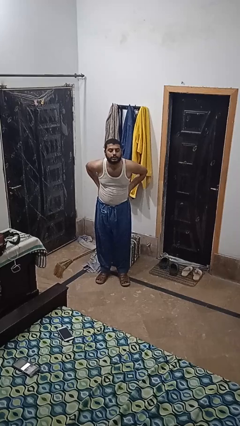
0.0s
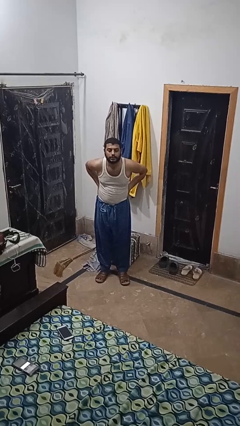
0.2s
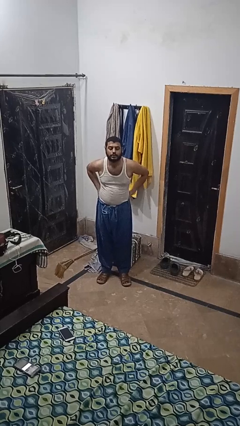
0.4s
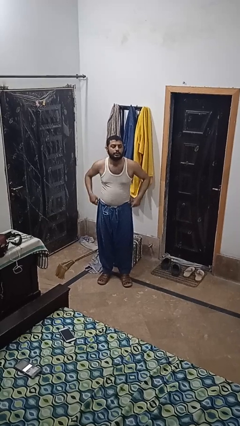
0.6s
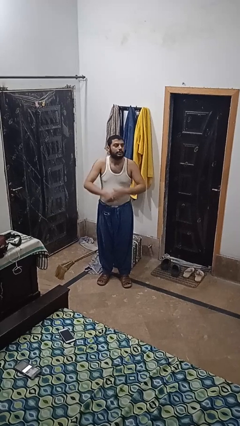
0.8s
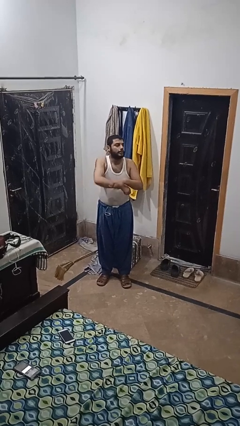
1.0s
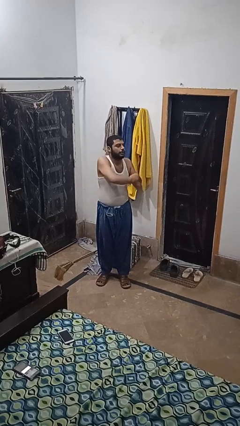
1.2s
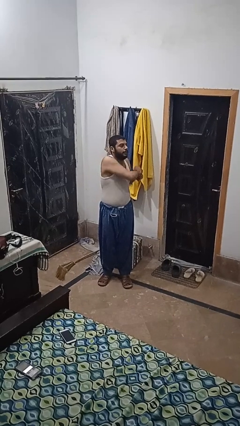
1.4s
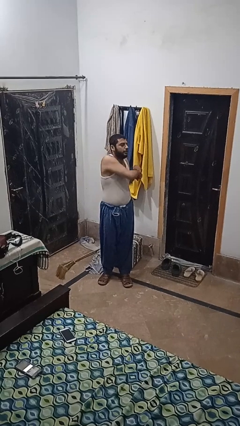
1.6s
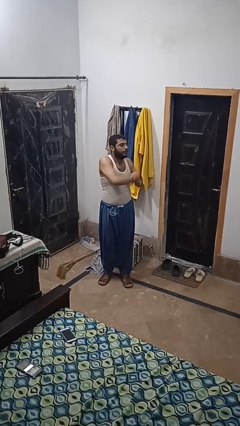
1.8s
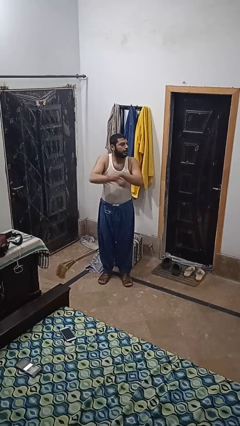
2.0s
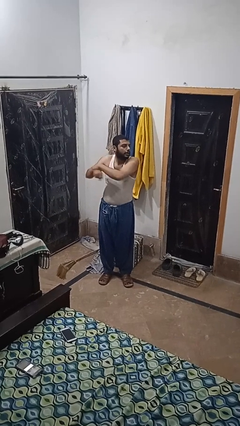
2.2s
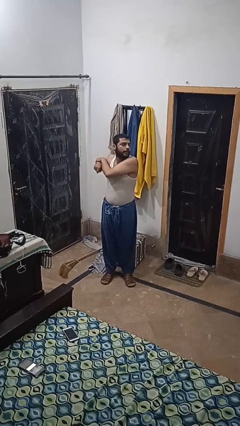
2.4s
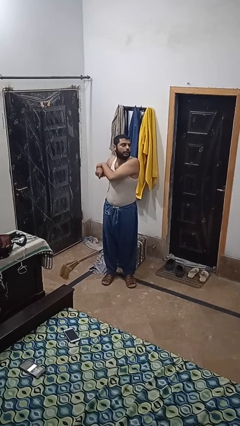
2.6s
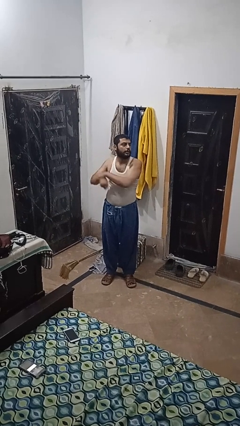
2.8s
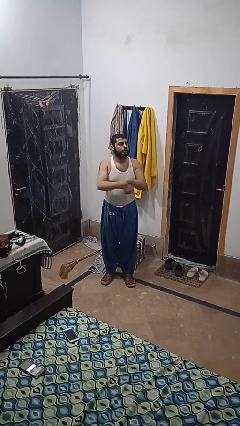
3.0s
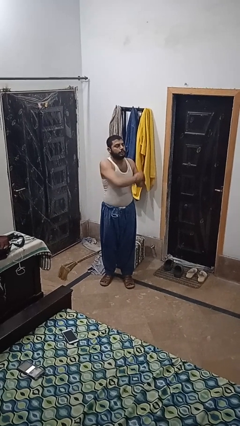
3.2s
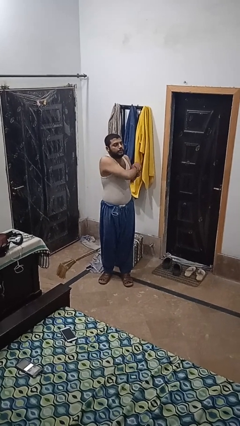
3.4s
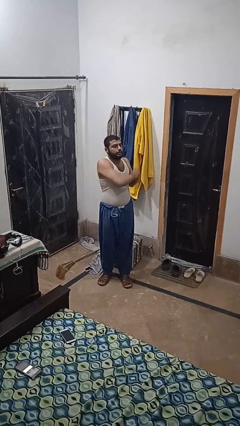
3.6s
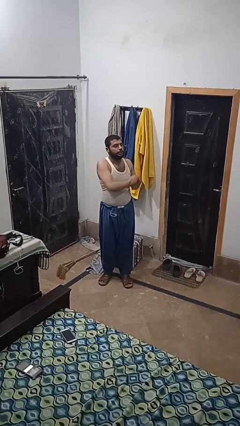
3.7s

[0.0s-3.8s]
person stretches arms to side

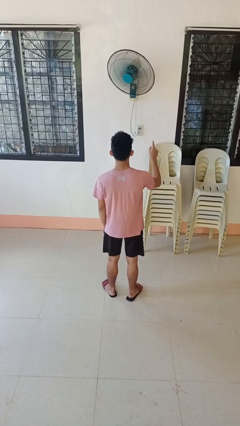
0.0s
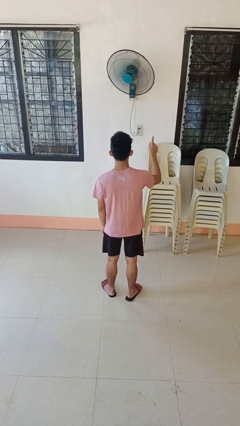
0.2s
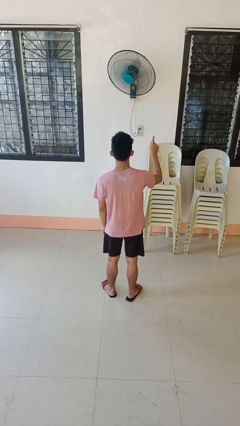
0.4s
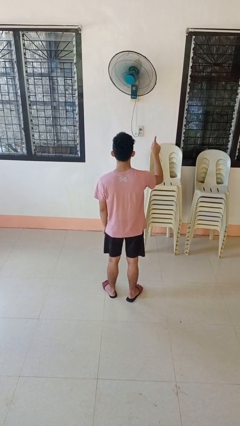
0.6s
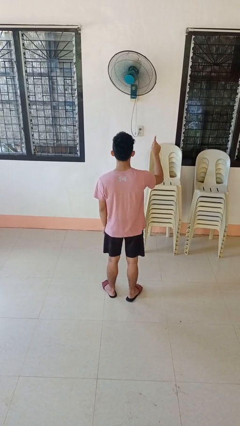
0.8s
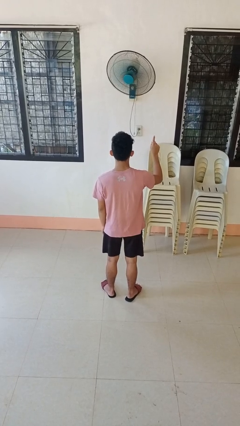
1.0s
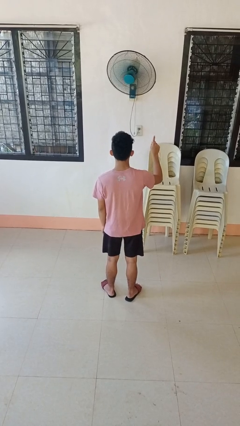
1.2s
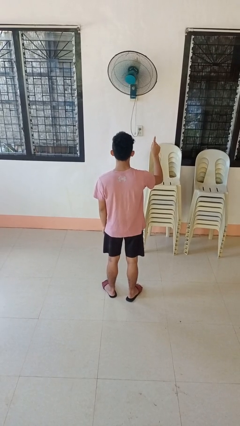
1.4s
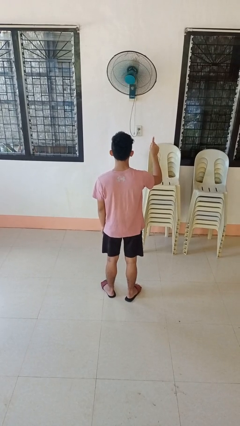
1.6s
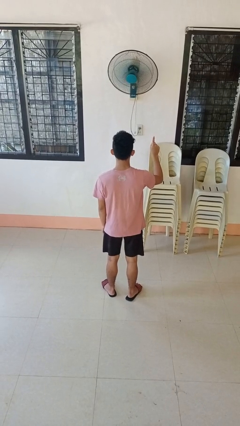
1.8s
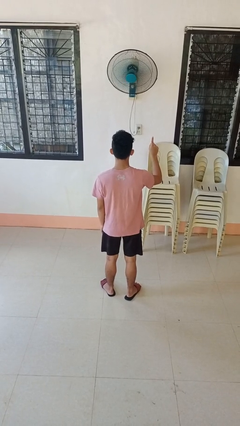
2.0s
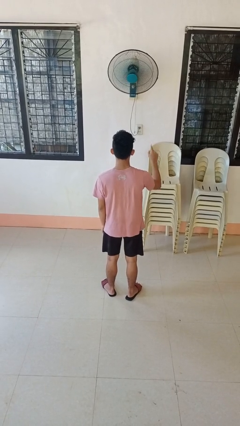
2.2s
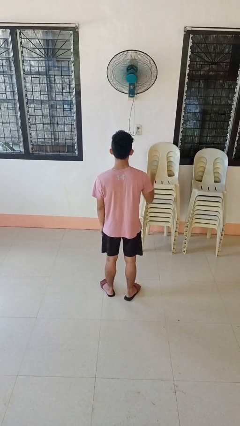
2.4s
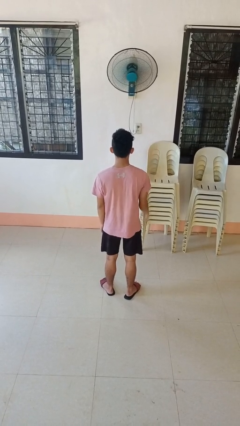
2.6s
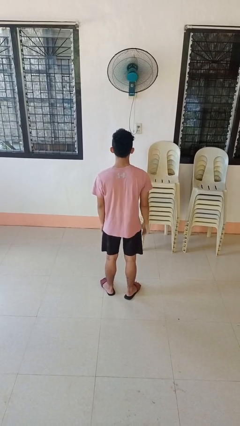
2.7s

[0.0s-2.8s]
person gestures number one

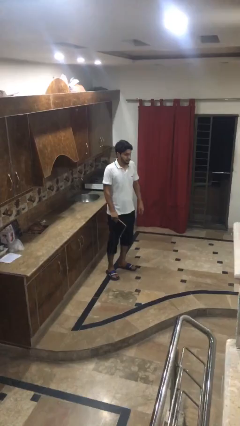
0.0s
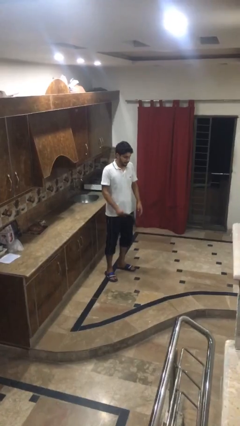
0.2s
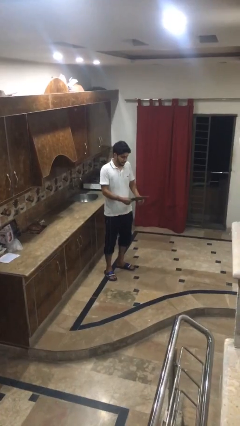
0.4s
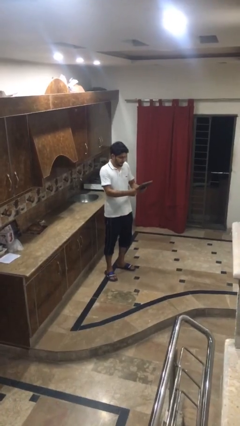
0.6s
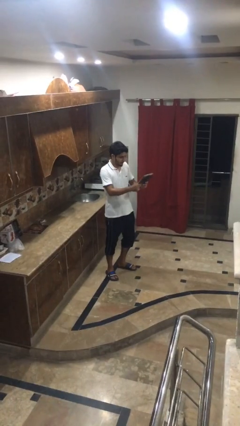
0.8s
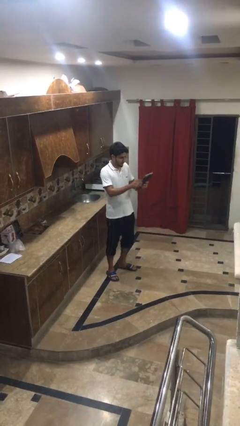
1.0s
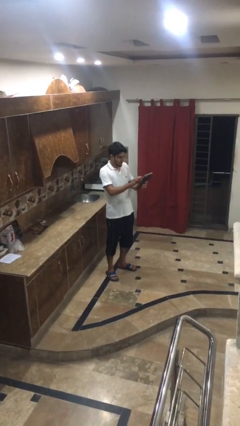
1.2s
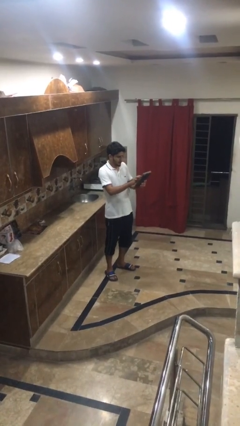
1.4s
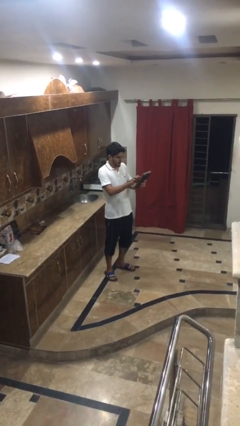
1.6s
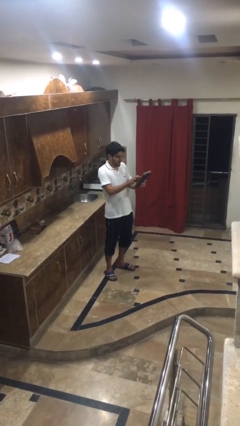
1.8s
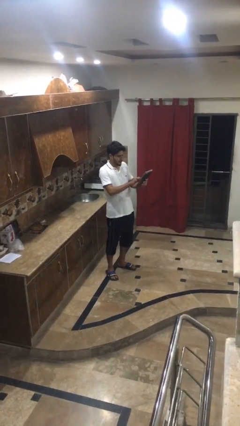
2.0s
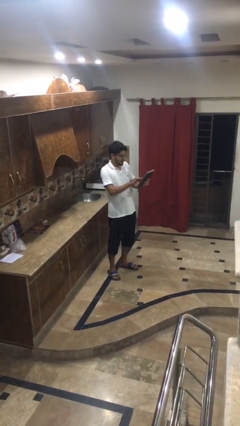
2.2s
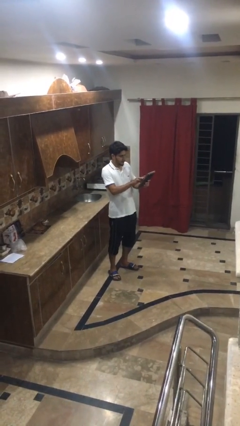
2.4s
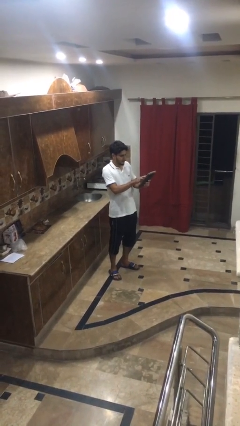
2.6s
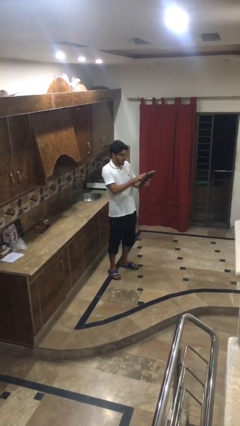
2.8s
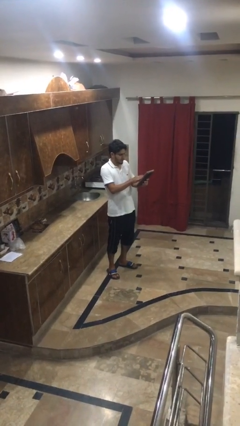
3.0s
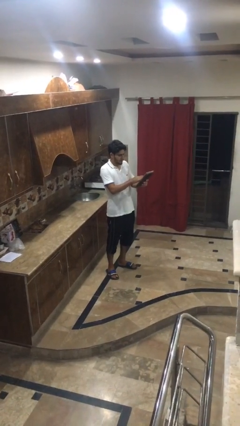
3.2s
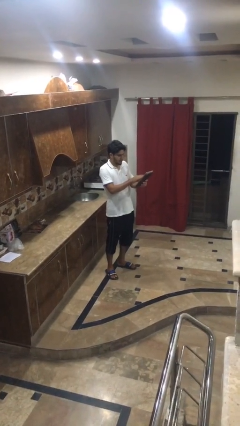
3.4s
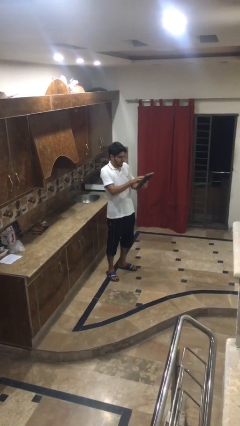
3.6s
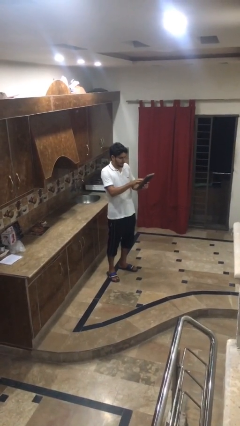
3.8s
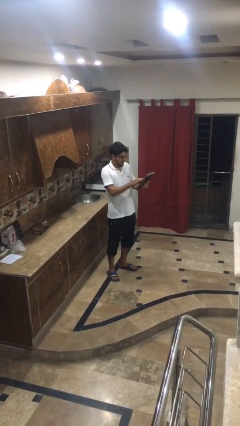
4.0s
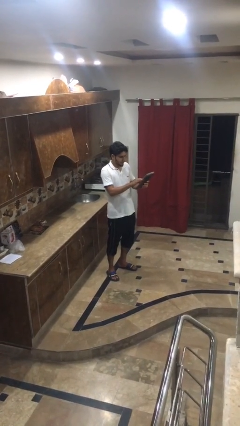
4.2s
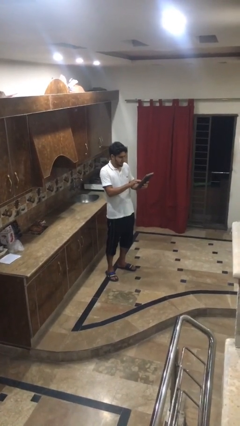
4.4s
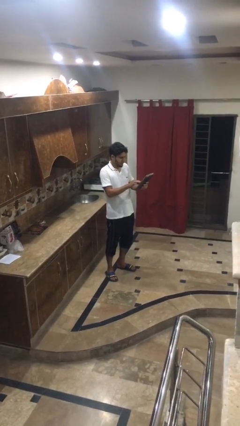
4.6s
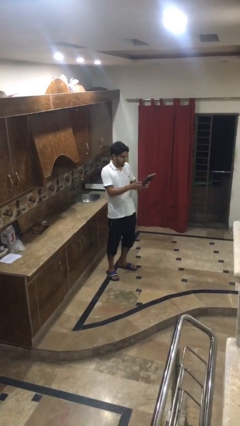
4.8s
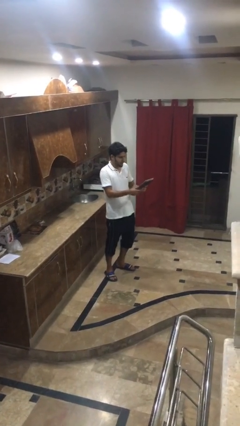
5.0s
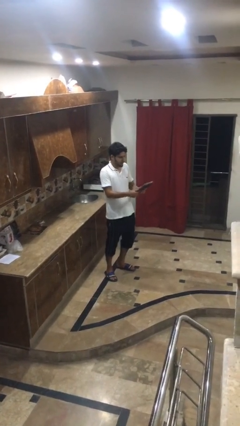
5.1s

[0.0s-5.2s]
person interacts with tablet

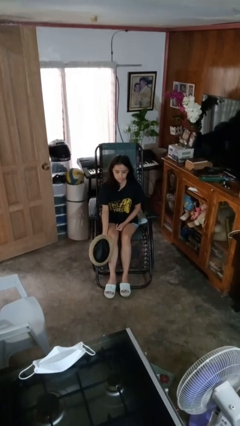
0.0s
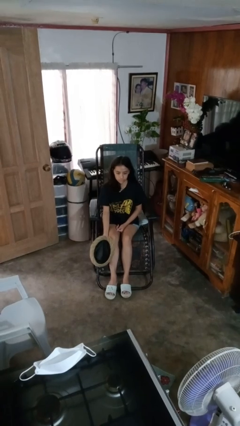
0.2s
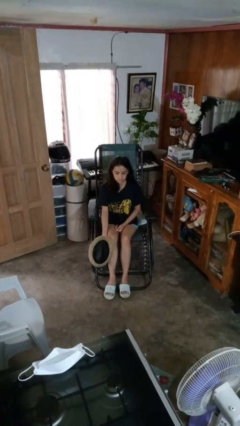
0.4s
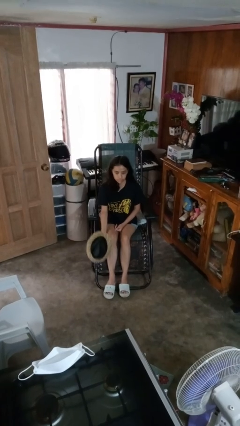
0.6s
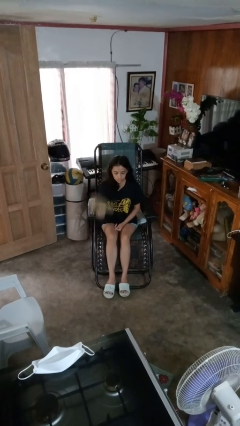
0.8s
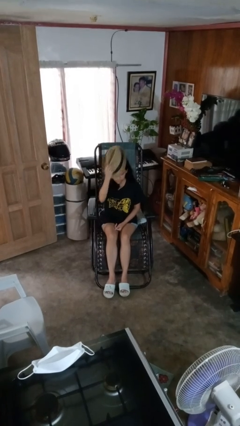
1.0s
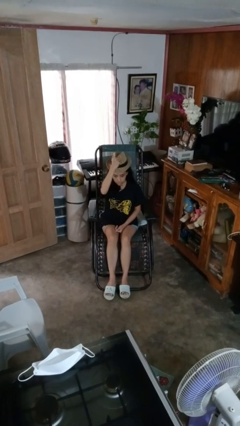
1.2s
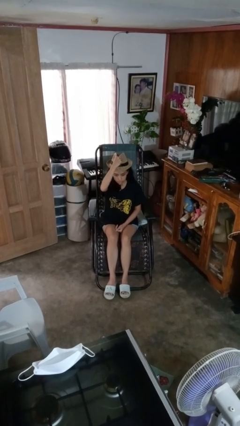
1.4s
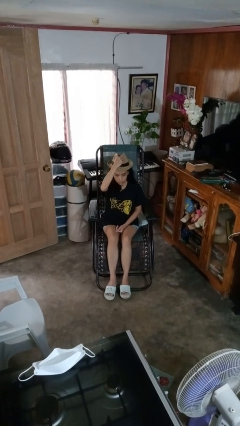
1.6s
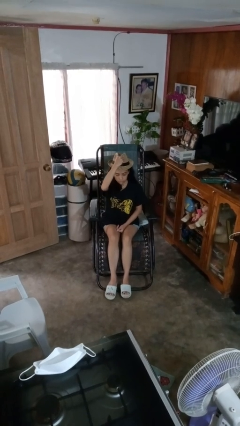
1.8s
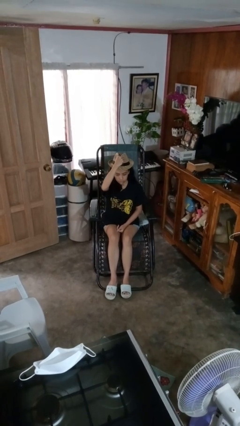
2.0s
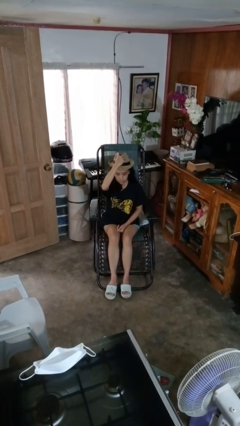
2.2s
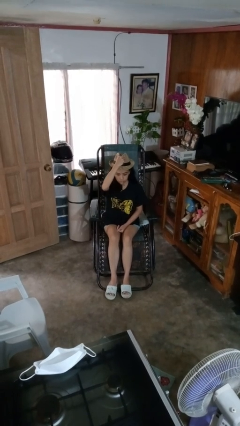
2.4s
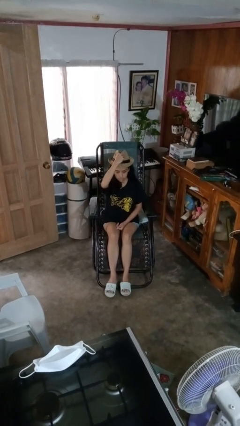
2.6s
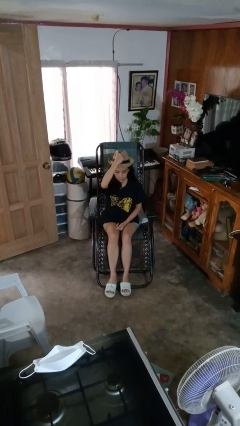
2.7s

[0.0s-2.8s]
person puts on hat

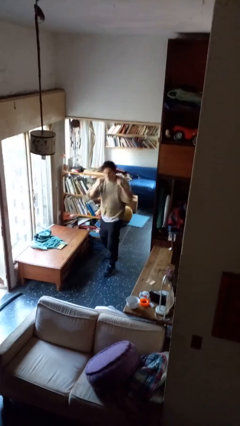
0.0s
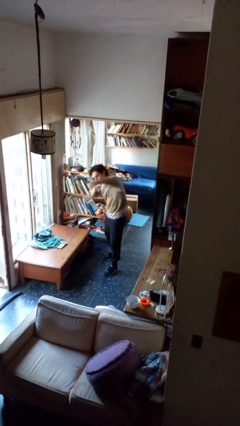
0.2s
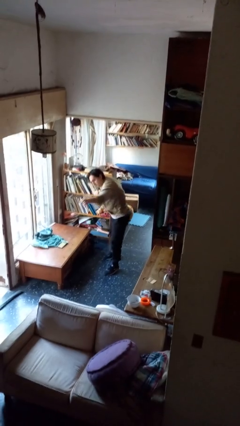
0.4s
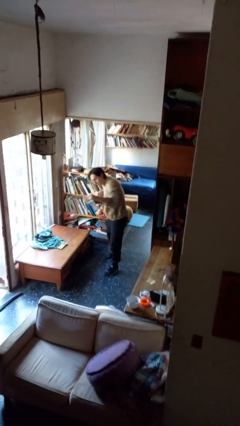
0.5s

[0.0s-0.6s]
person punches

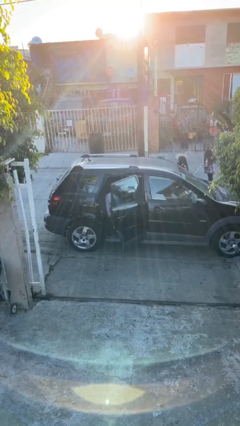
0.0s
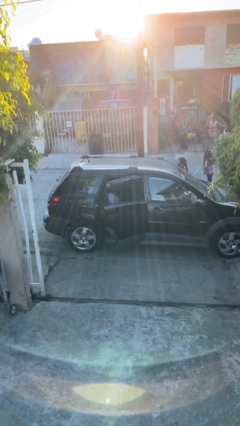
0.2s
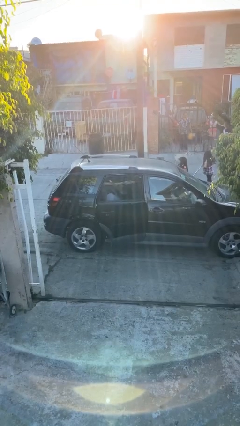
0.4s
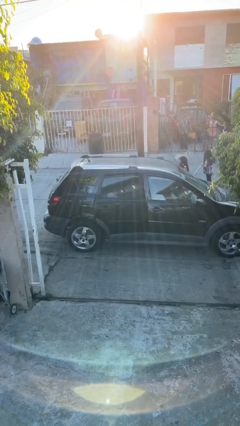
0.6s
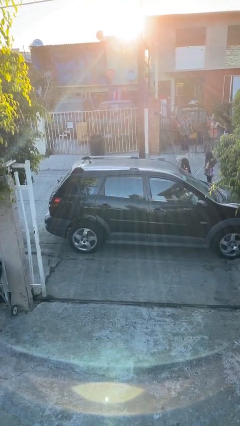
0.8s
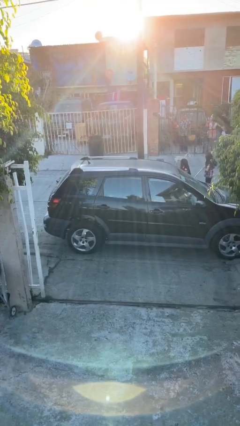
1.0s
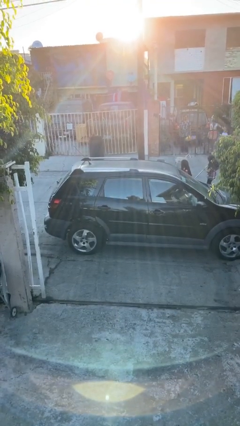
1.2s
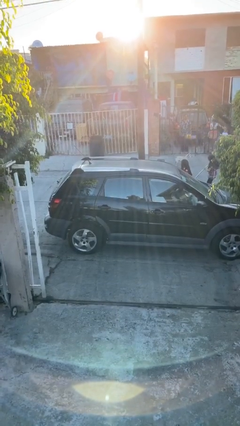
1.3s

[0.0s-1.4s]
person closes car door

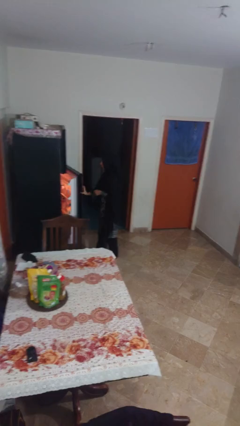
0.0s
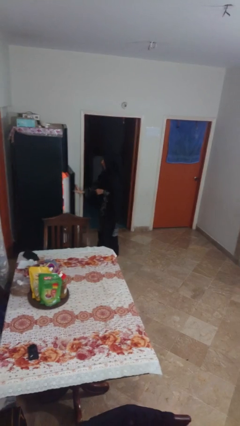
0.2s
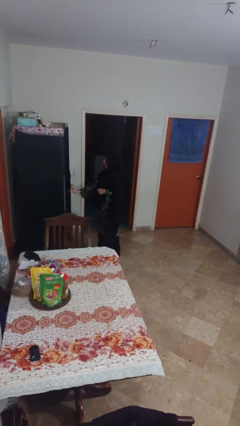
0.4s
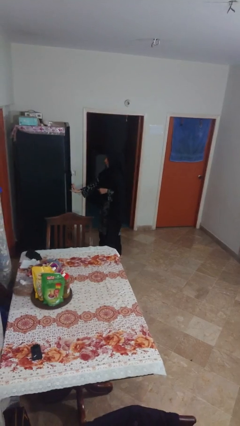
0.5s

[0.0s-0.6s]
person closes refrigerator
